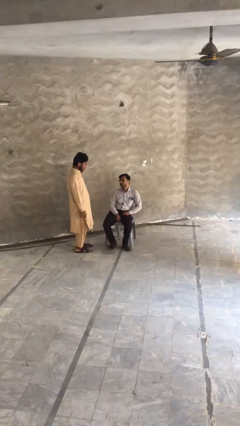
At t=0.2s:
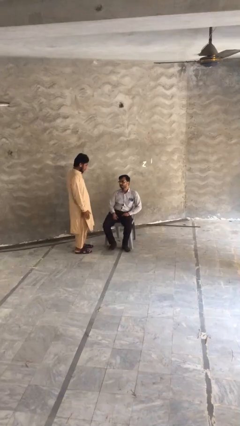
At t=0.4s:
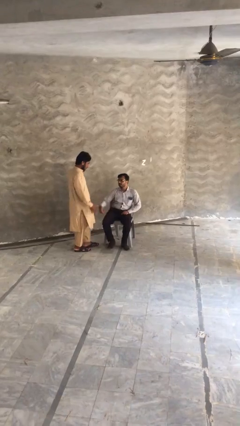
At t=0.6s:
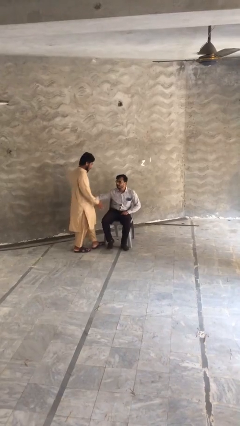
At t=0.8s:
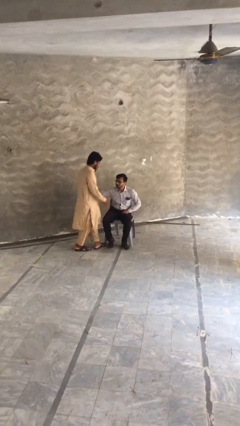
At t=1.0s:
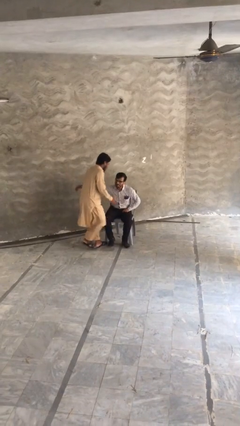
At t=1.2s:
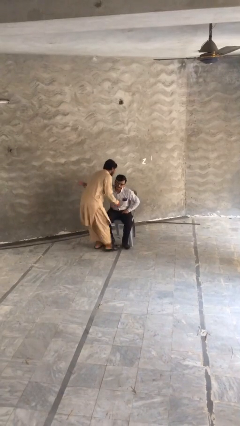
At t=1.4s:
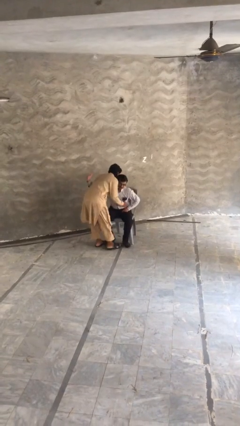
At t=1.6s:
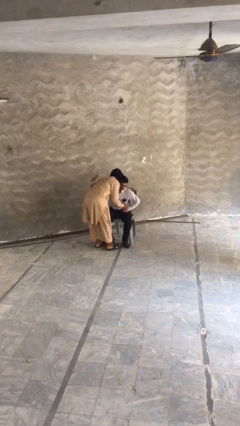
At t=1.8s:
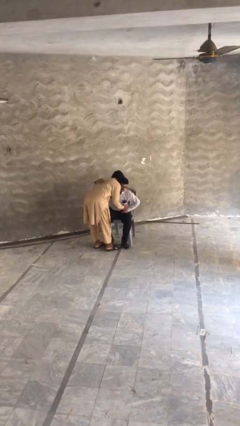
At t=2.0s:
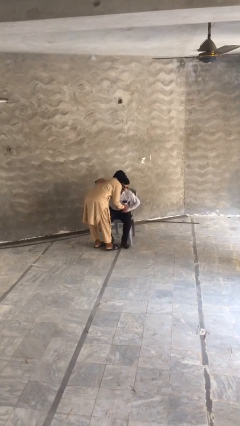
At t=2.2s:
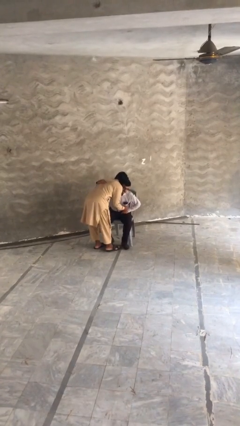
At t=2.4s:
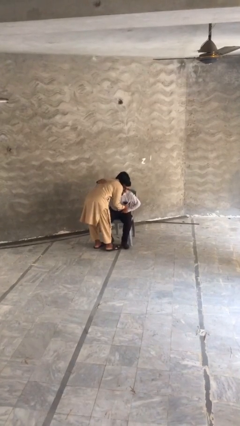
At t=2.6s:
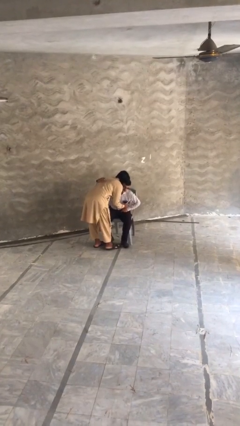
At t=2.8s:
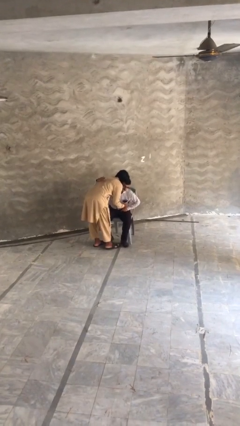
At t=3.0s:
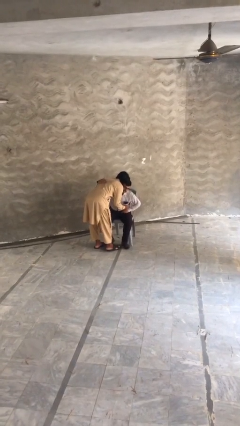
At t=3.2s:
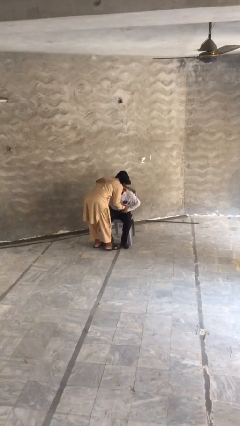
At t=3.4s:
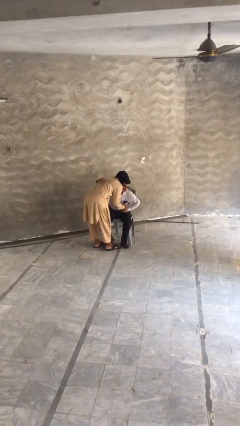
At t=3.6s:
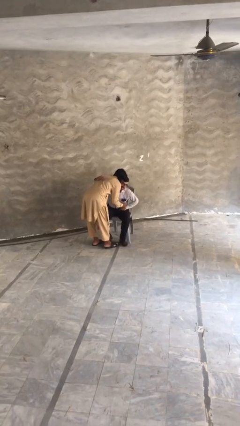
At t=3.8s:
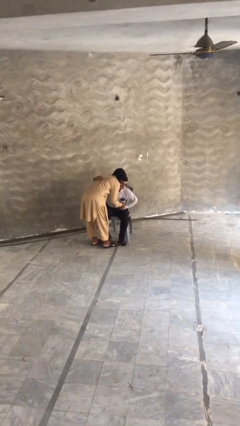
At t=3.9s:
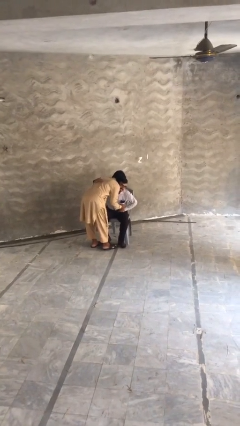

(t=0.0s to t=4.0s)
person embraces person

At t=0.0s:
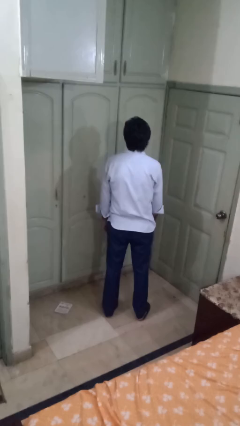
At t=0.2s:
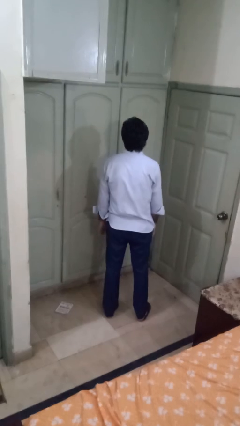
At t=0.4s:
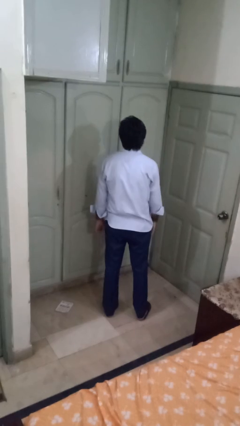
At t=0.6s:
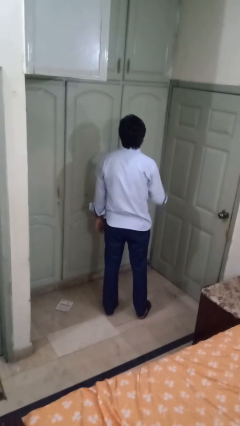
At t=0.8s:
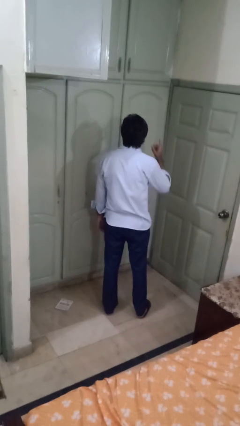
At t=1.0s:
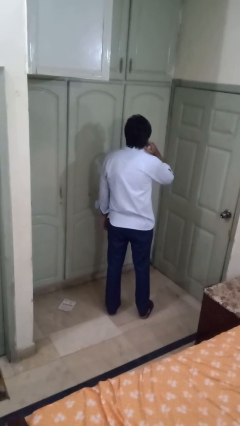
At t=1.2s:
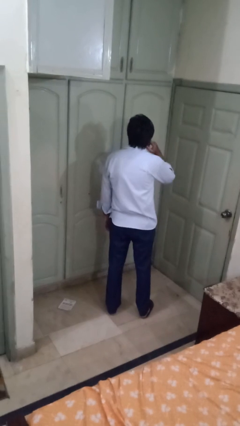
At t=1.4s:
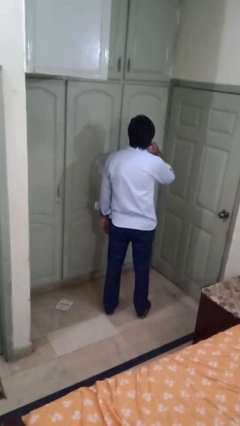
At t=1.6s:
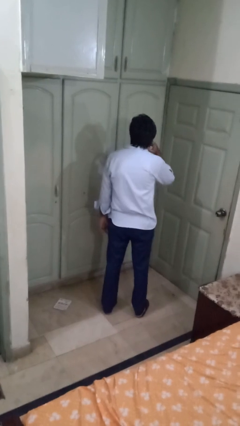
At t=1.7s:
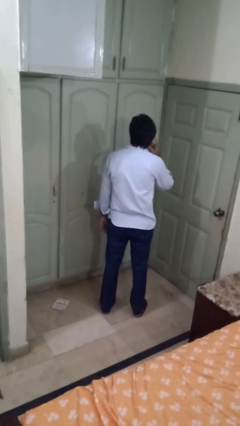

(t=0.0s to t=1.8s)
person gestures listen closely

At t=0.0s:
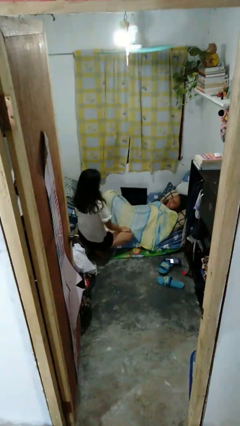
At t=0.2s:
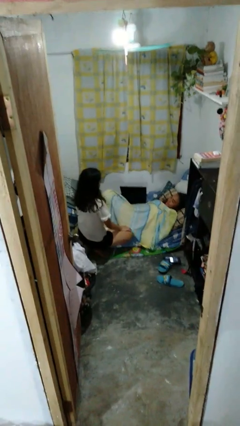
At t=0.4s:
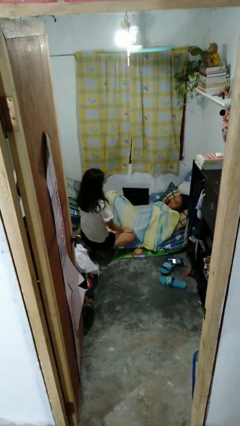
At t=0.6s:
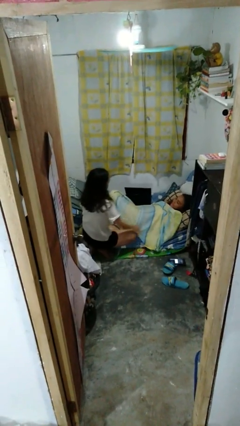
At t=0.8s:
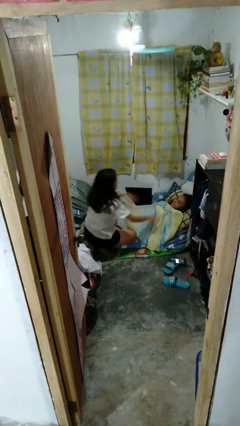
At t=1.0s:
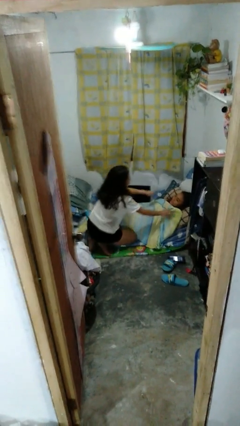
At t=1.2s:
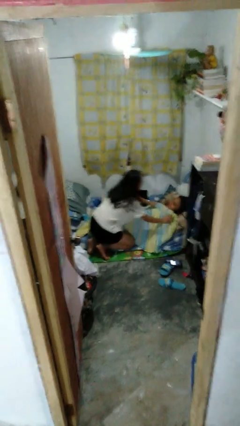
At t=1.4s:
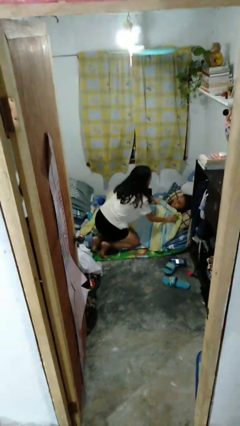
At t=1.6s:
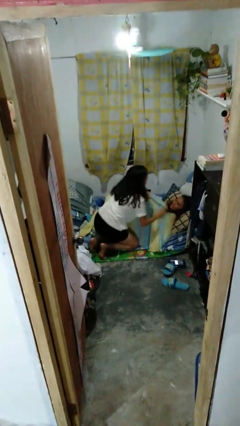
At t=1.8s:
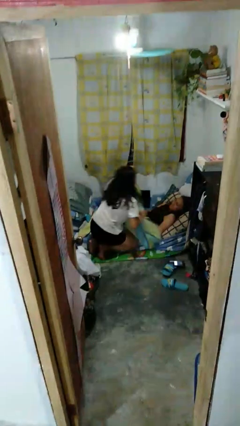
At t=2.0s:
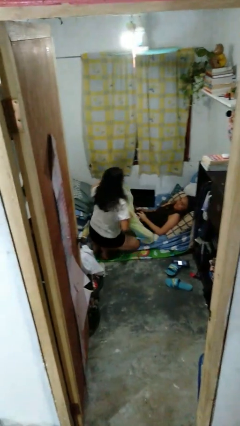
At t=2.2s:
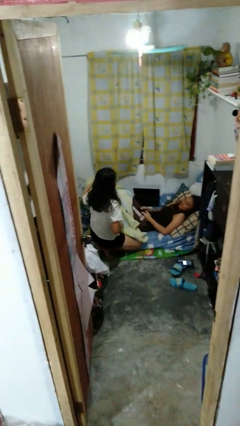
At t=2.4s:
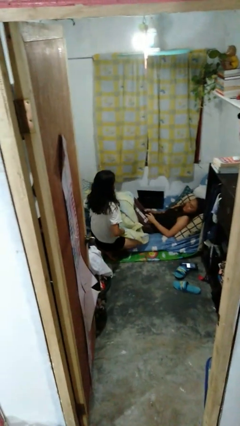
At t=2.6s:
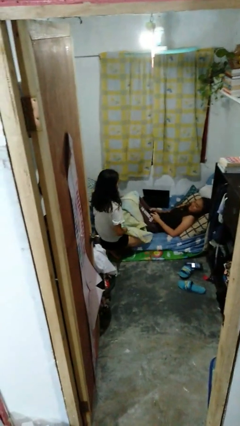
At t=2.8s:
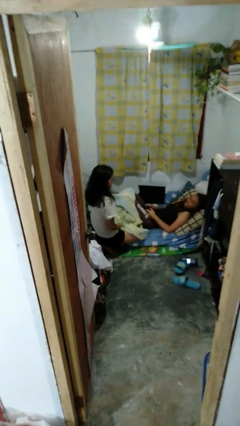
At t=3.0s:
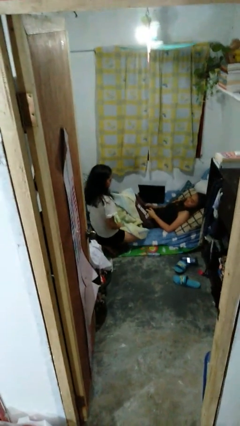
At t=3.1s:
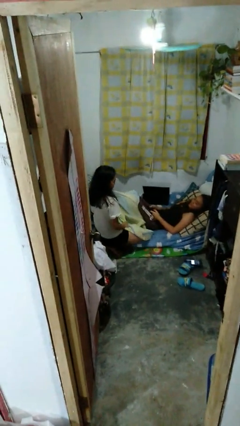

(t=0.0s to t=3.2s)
person uncovers friend with blanket

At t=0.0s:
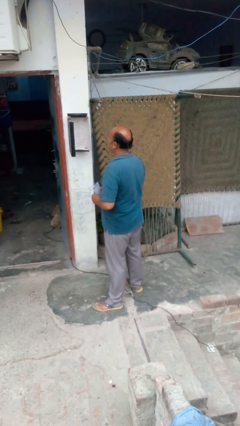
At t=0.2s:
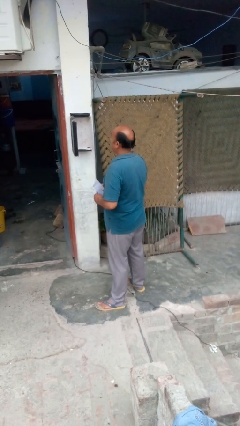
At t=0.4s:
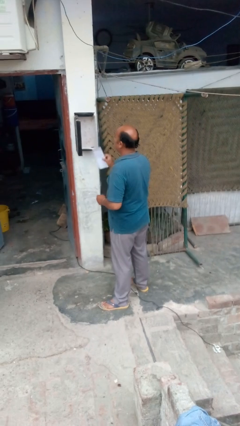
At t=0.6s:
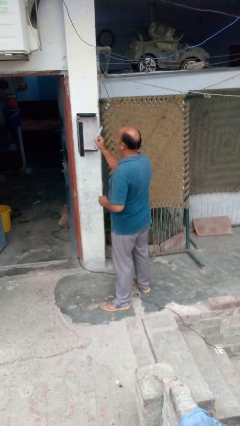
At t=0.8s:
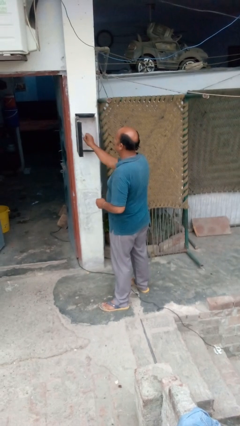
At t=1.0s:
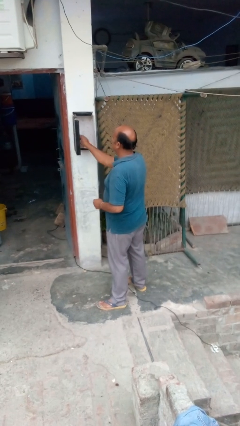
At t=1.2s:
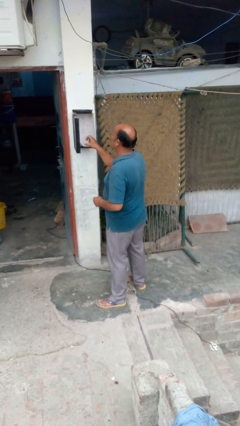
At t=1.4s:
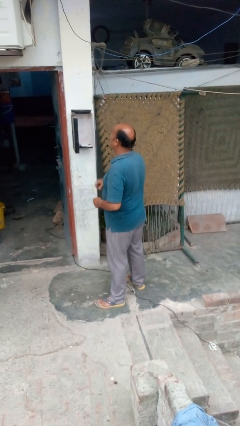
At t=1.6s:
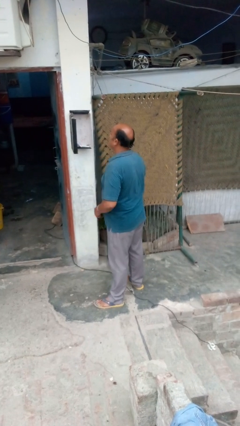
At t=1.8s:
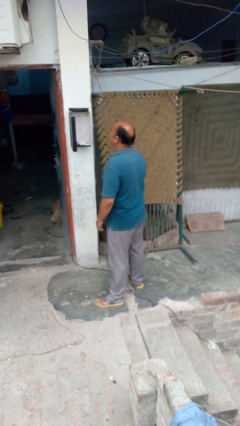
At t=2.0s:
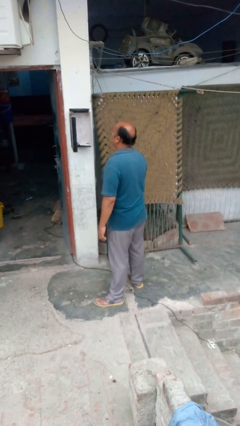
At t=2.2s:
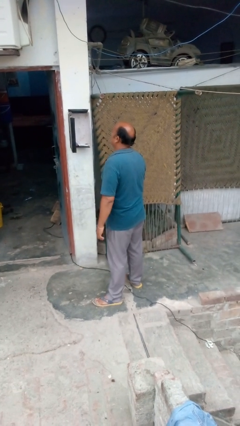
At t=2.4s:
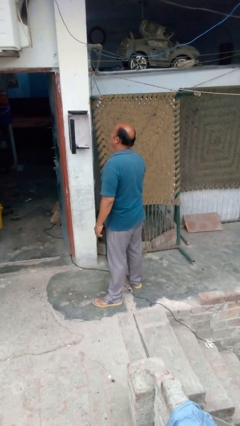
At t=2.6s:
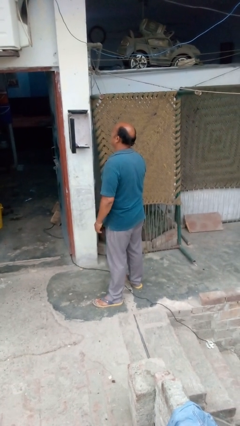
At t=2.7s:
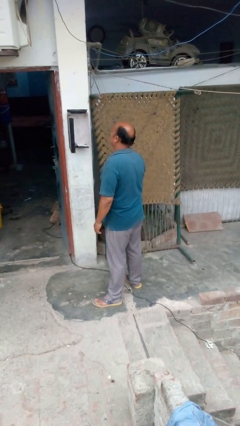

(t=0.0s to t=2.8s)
person puts letters in mailbox

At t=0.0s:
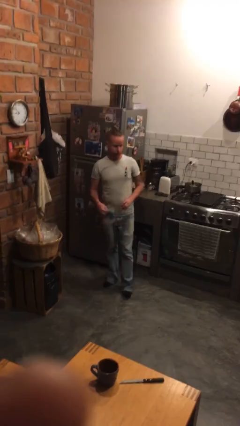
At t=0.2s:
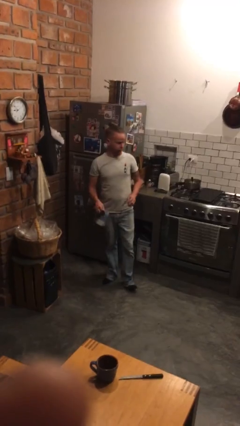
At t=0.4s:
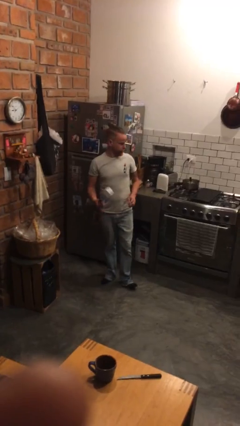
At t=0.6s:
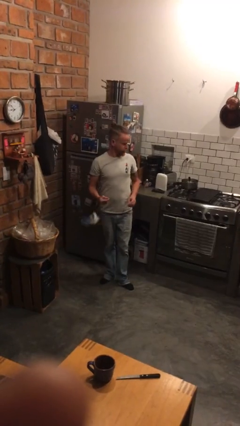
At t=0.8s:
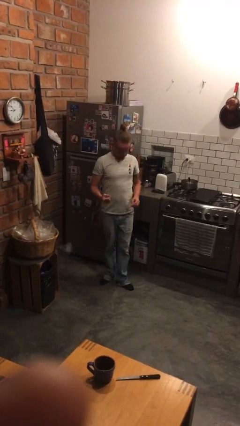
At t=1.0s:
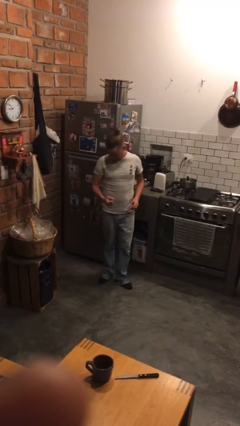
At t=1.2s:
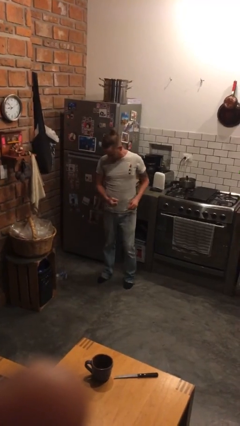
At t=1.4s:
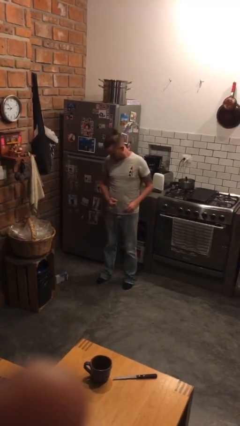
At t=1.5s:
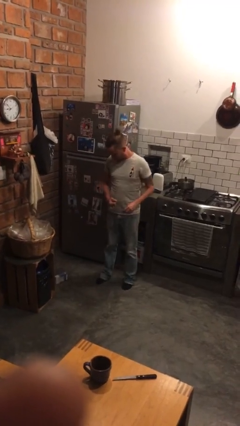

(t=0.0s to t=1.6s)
person drops object

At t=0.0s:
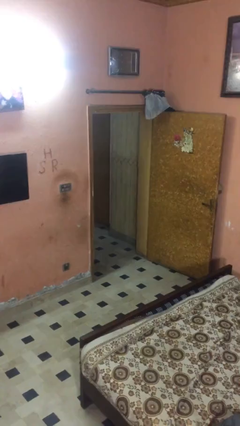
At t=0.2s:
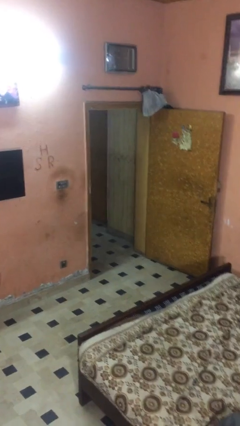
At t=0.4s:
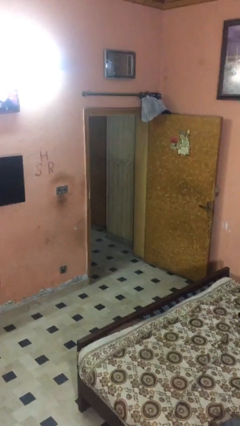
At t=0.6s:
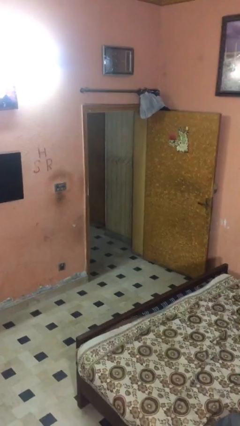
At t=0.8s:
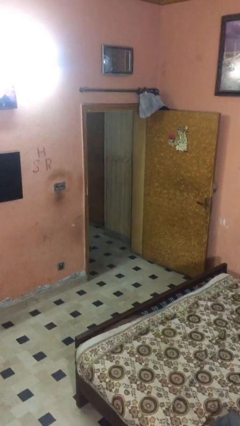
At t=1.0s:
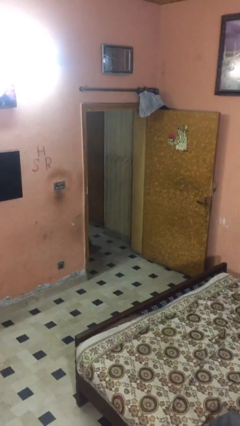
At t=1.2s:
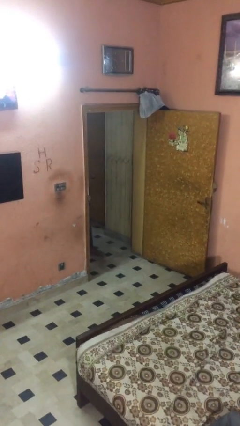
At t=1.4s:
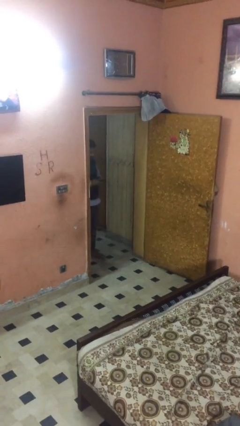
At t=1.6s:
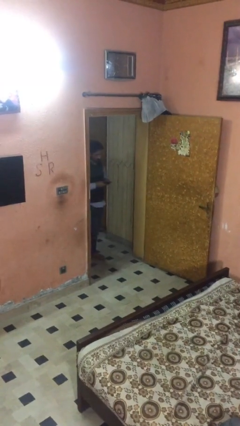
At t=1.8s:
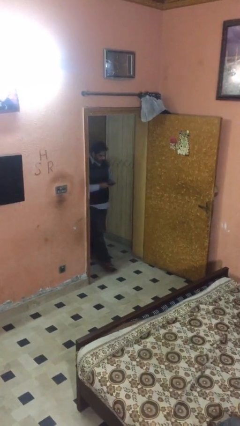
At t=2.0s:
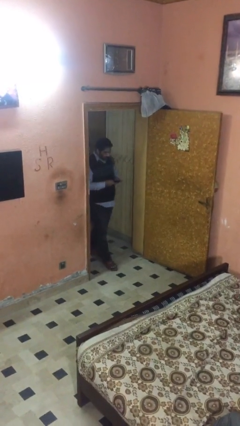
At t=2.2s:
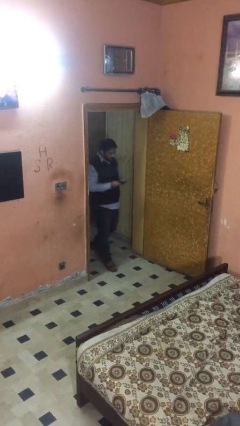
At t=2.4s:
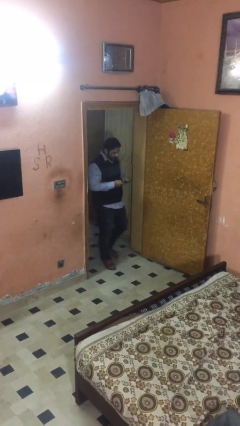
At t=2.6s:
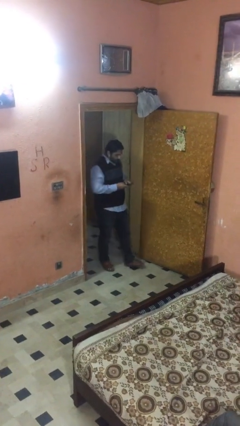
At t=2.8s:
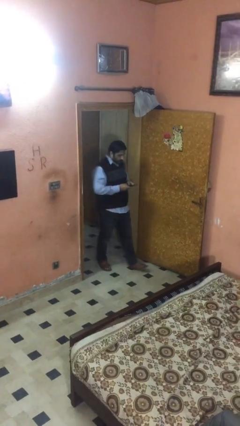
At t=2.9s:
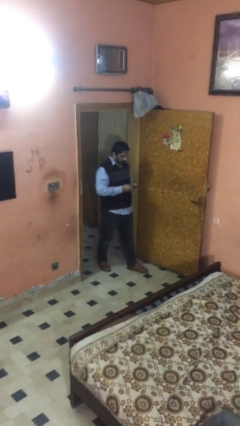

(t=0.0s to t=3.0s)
person enters scene through structure

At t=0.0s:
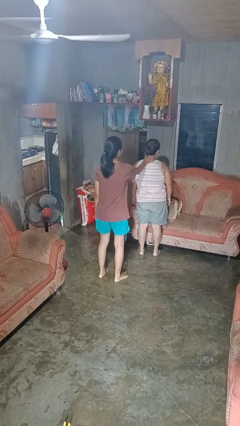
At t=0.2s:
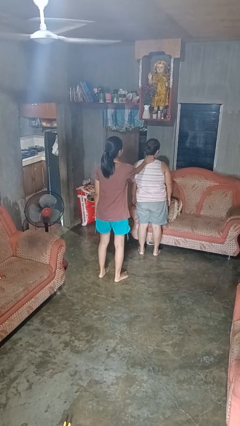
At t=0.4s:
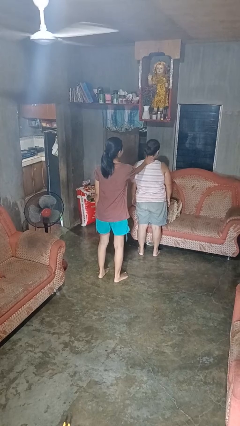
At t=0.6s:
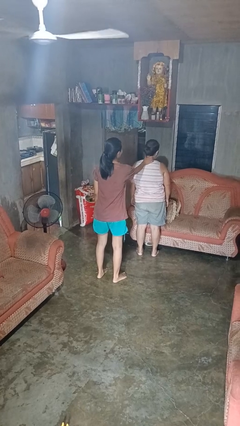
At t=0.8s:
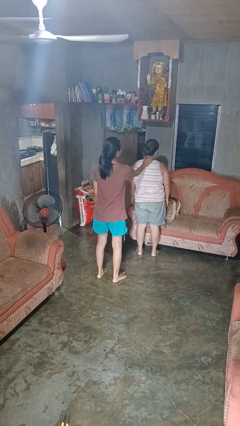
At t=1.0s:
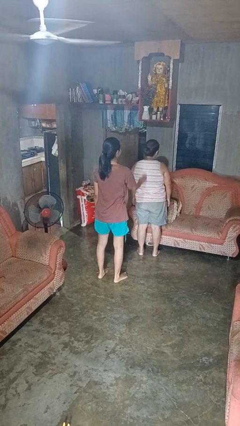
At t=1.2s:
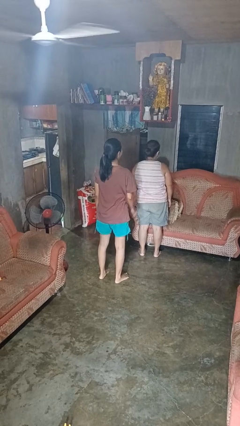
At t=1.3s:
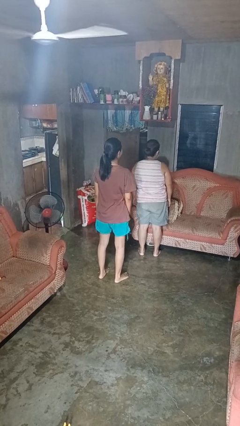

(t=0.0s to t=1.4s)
person tickles person
